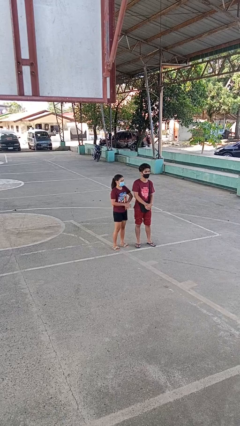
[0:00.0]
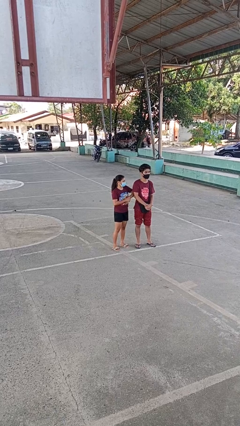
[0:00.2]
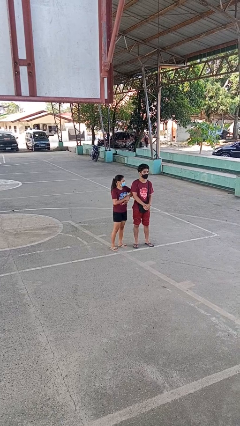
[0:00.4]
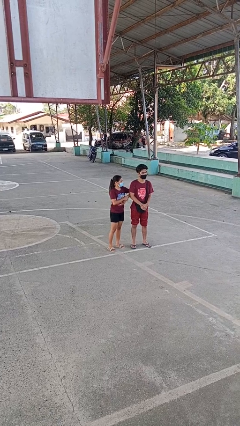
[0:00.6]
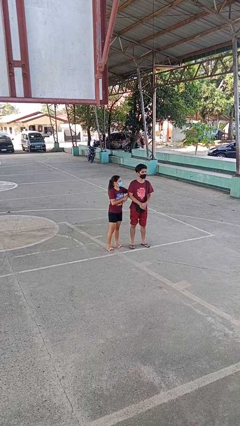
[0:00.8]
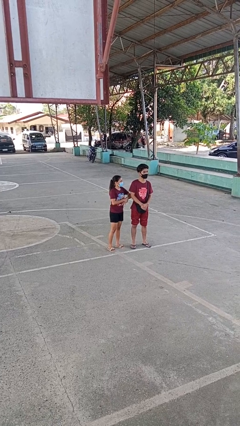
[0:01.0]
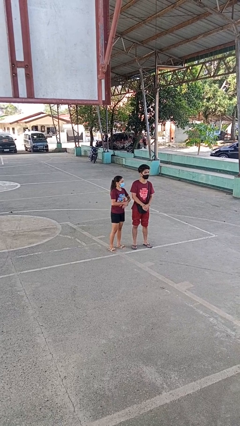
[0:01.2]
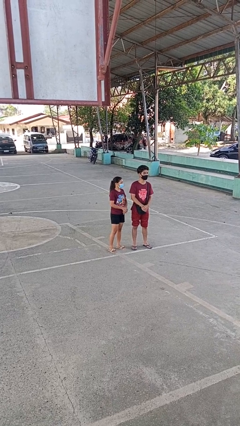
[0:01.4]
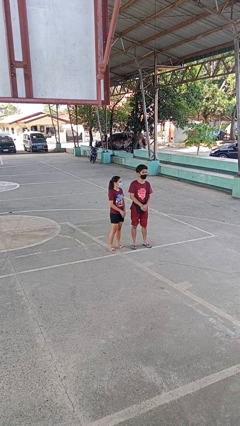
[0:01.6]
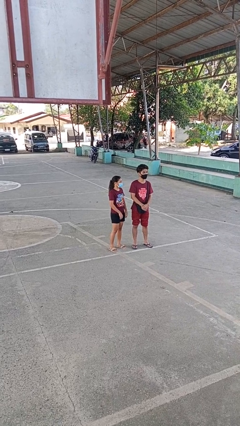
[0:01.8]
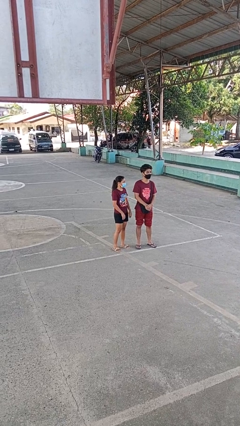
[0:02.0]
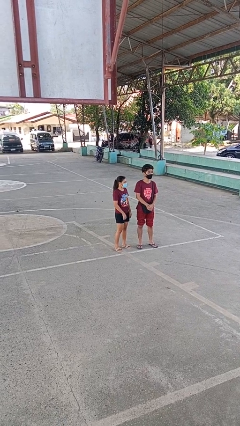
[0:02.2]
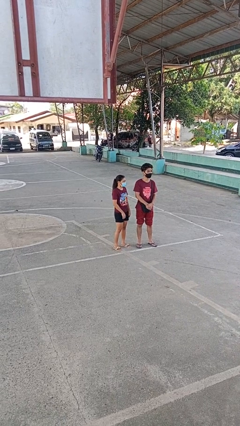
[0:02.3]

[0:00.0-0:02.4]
person nudges person with elbow

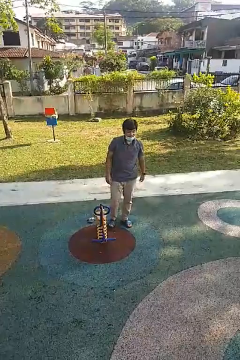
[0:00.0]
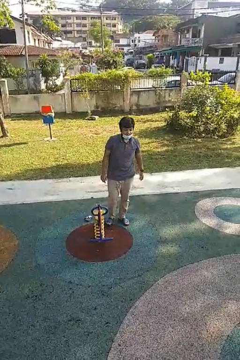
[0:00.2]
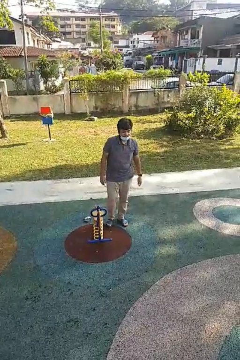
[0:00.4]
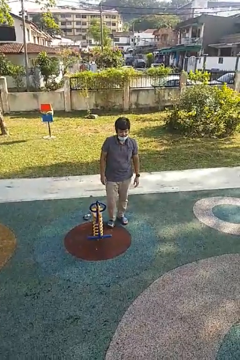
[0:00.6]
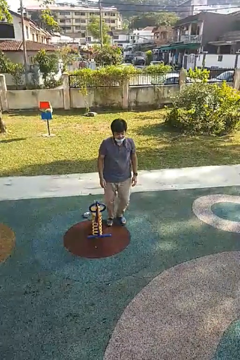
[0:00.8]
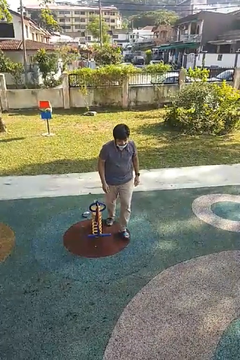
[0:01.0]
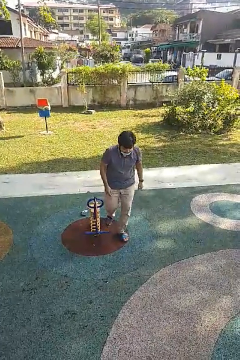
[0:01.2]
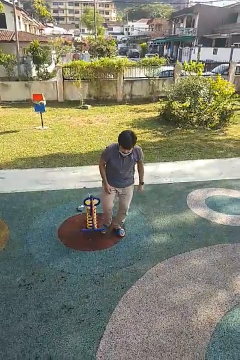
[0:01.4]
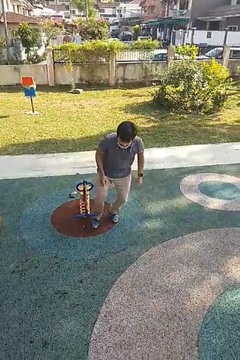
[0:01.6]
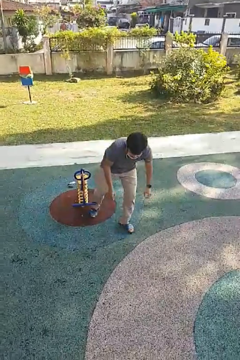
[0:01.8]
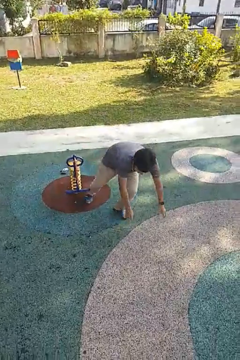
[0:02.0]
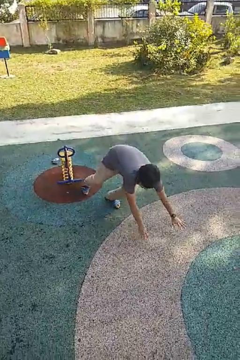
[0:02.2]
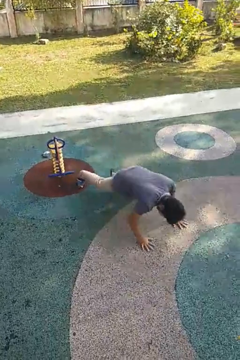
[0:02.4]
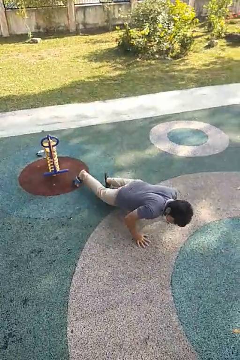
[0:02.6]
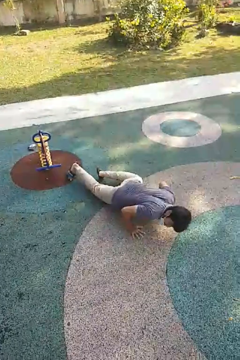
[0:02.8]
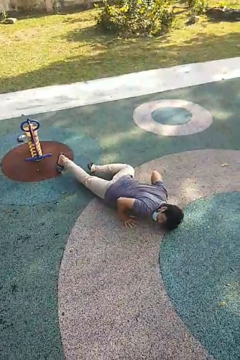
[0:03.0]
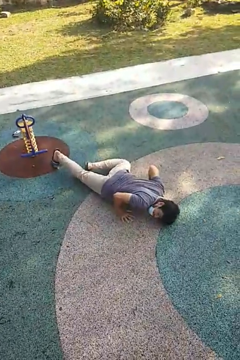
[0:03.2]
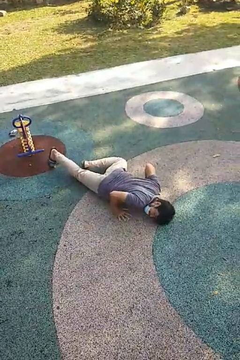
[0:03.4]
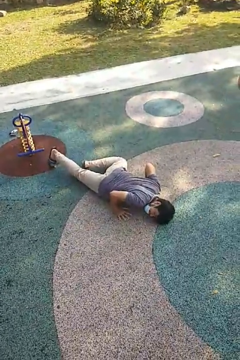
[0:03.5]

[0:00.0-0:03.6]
person trips on object on floor

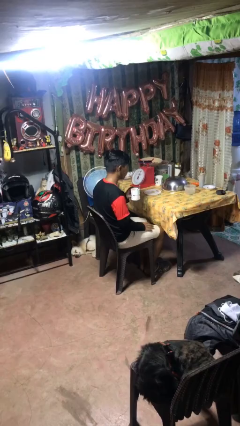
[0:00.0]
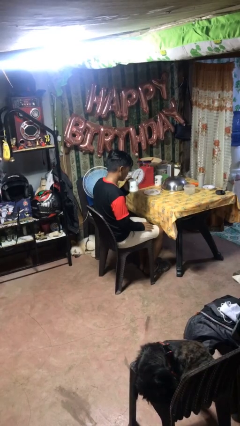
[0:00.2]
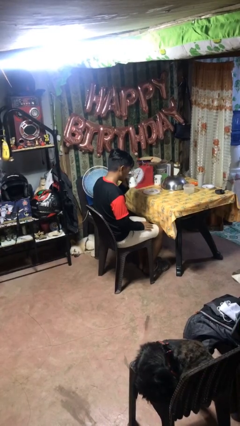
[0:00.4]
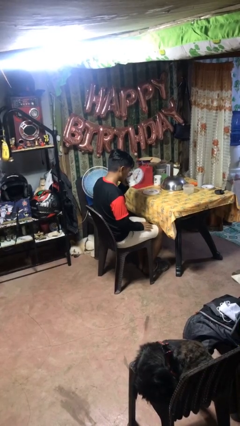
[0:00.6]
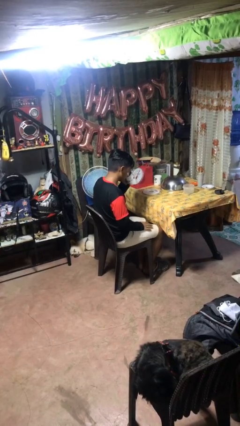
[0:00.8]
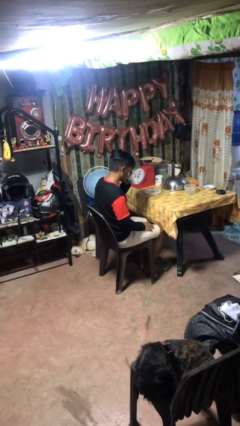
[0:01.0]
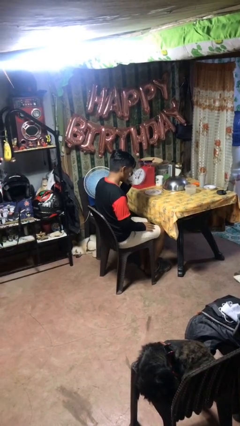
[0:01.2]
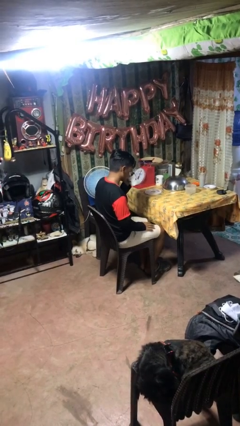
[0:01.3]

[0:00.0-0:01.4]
person drinks from mug

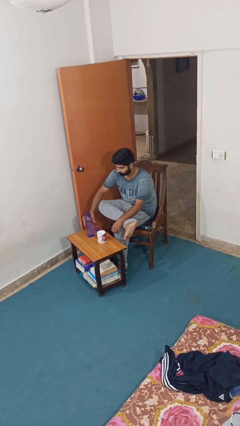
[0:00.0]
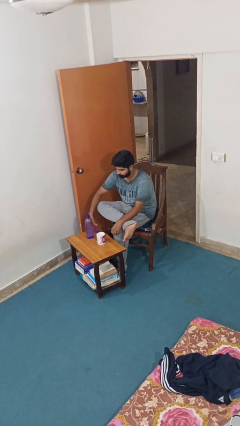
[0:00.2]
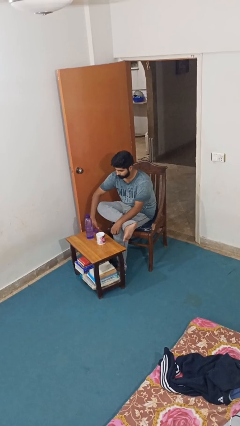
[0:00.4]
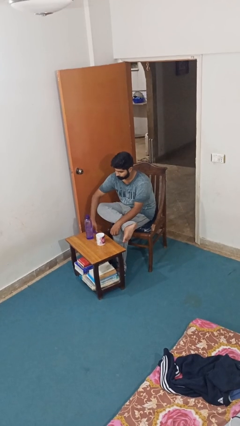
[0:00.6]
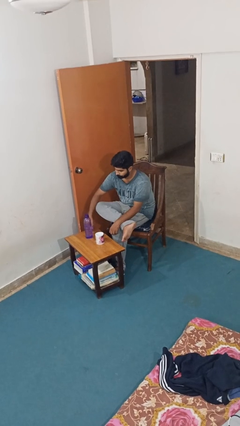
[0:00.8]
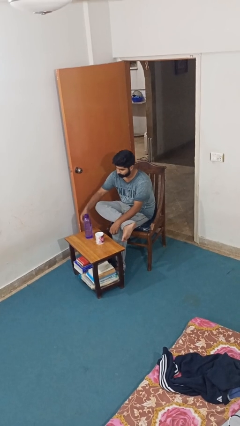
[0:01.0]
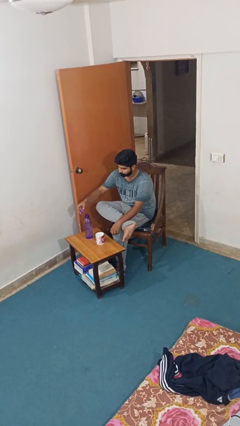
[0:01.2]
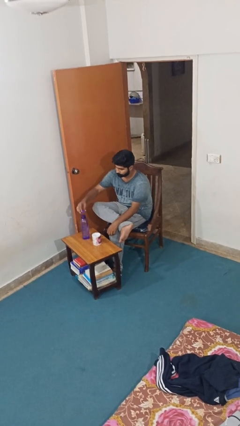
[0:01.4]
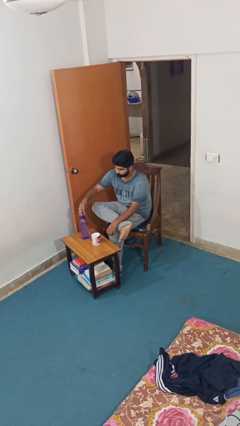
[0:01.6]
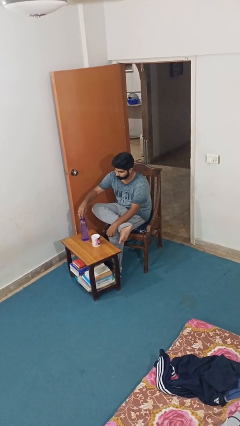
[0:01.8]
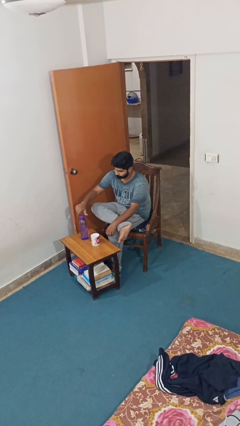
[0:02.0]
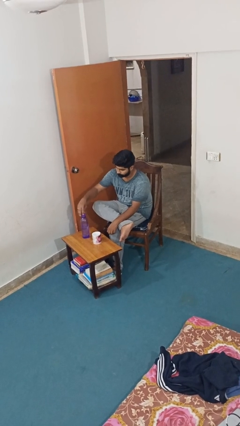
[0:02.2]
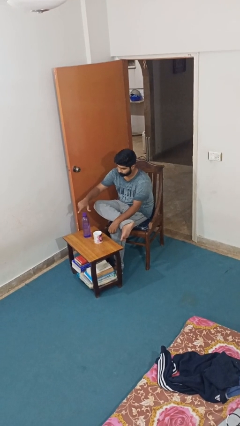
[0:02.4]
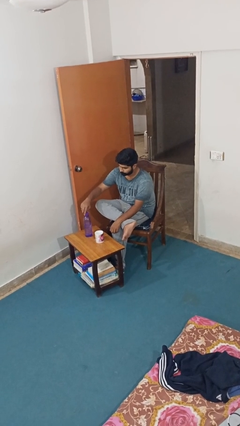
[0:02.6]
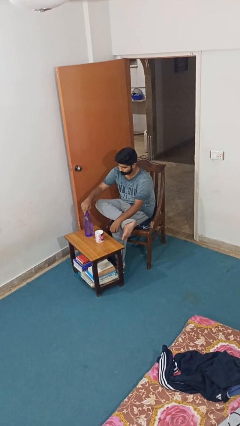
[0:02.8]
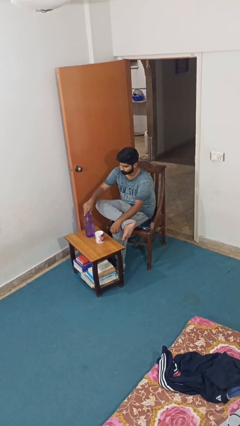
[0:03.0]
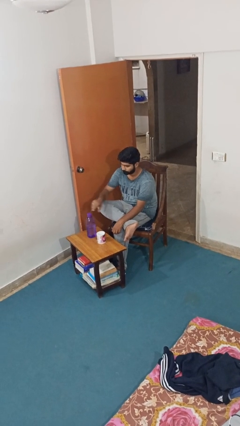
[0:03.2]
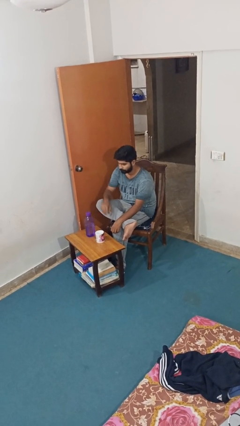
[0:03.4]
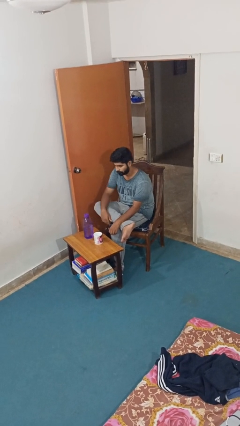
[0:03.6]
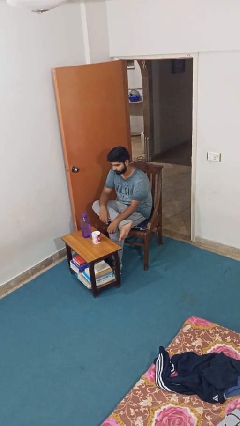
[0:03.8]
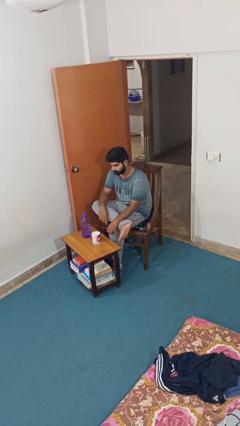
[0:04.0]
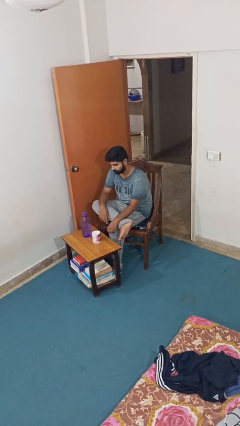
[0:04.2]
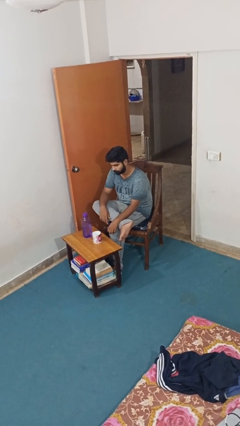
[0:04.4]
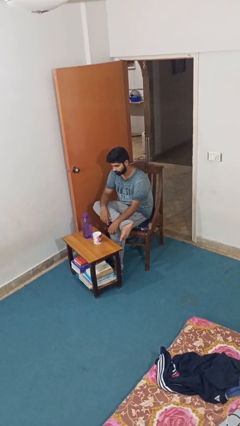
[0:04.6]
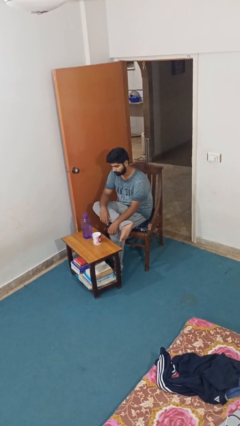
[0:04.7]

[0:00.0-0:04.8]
person screws lid to bottle

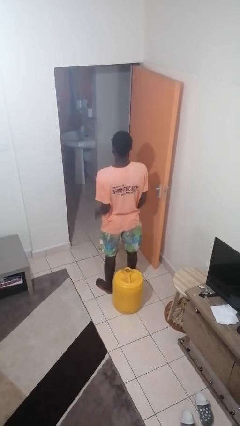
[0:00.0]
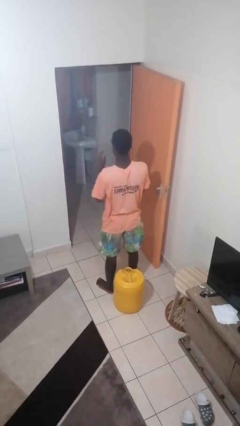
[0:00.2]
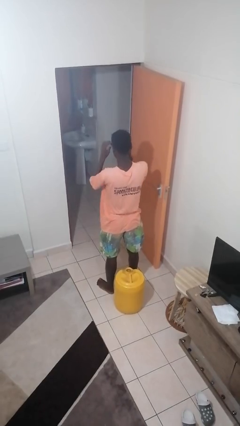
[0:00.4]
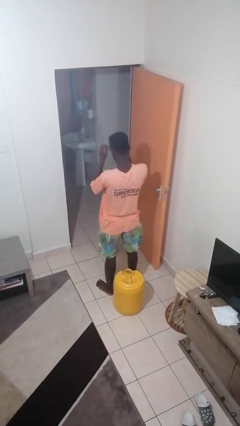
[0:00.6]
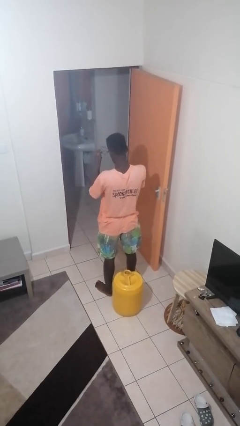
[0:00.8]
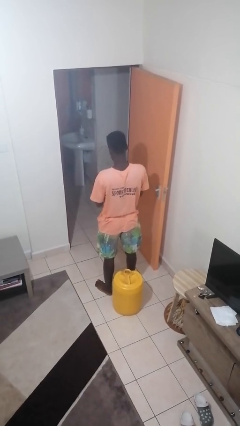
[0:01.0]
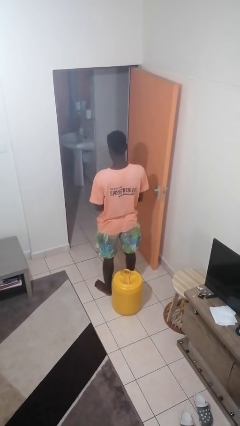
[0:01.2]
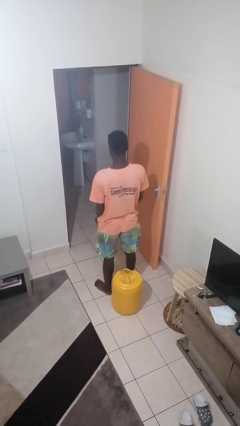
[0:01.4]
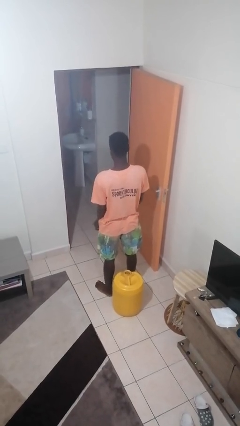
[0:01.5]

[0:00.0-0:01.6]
person takes off glasses

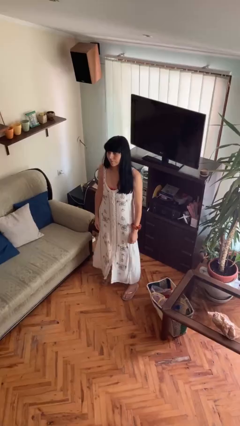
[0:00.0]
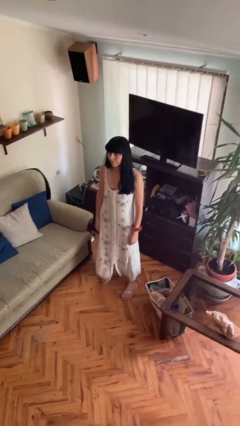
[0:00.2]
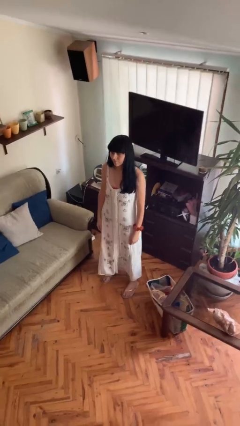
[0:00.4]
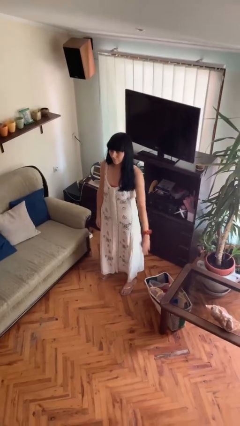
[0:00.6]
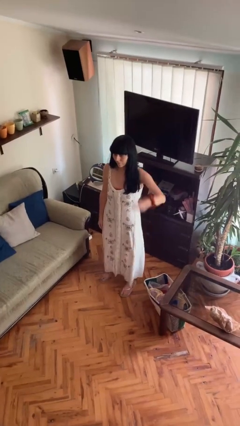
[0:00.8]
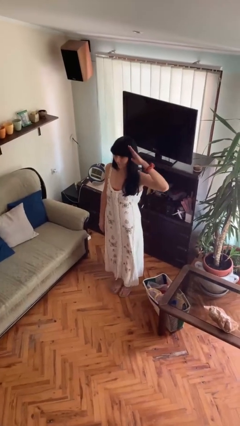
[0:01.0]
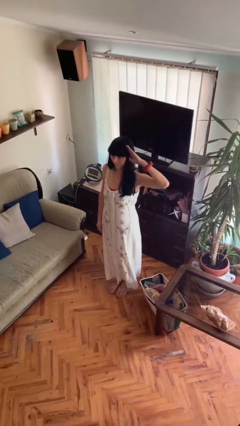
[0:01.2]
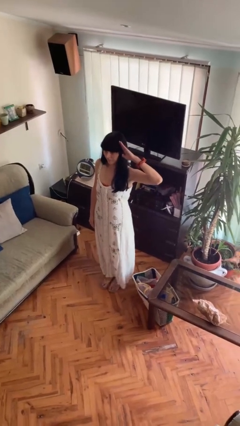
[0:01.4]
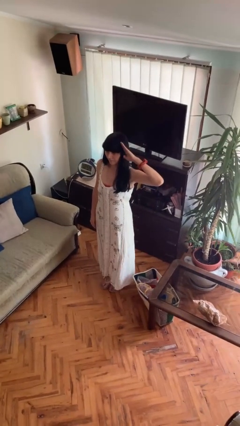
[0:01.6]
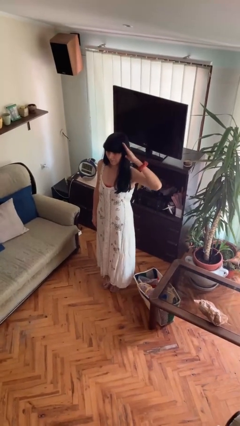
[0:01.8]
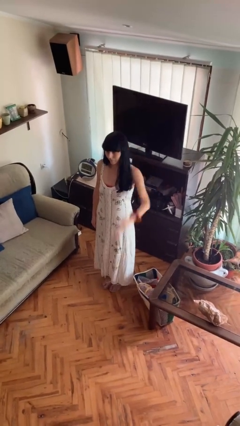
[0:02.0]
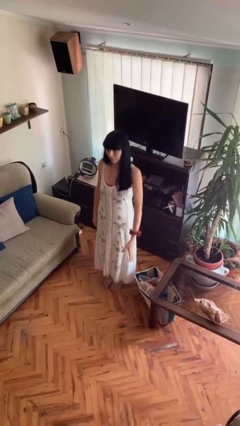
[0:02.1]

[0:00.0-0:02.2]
person salutes

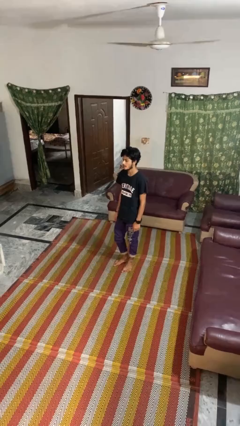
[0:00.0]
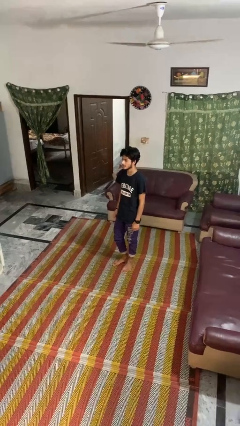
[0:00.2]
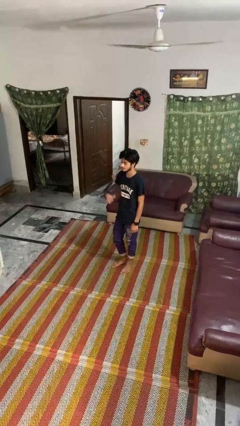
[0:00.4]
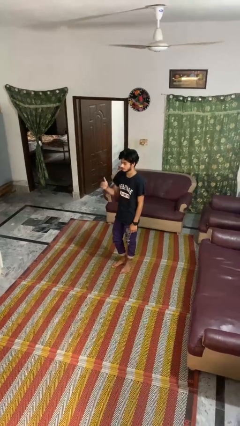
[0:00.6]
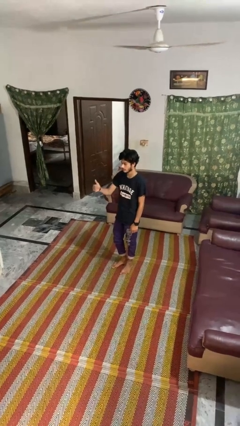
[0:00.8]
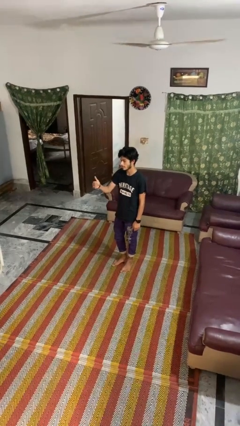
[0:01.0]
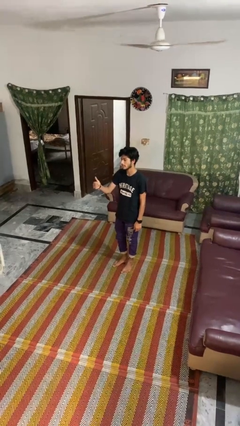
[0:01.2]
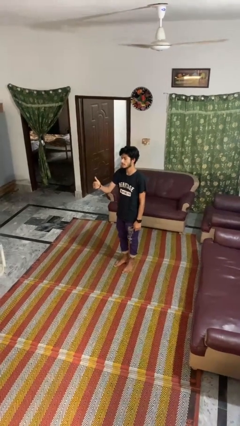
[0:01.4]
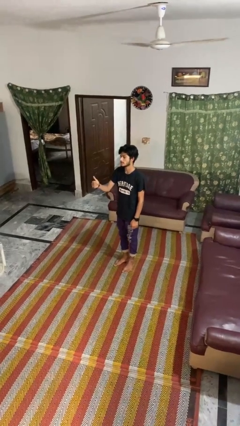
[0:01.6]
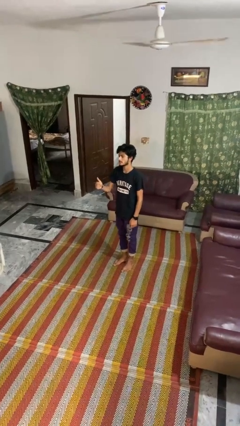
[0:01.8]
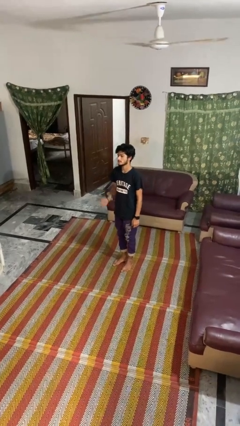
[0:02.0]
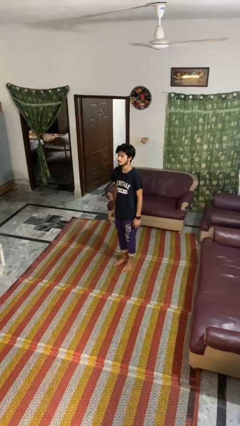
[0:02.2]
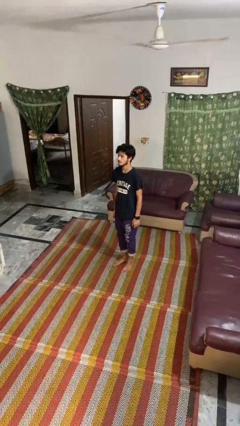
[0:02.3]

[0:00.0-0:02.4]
person gestures thumbs up
